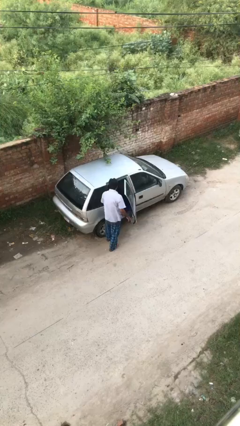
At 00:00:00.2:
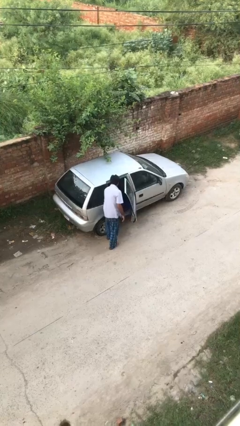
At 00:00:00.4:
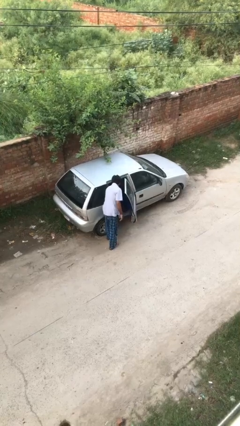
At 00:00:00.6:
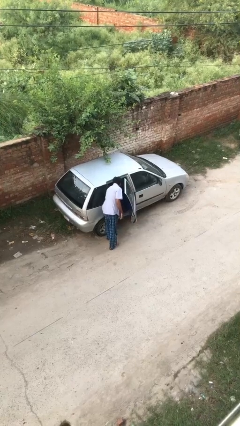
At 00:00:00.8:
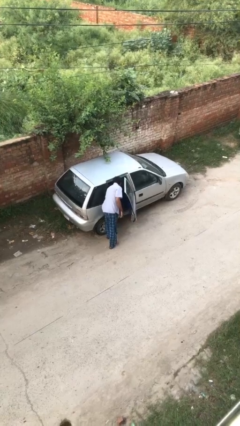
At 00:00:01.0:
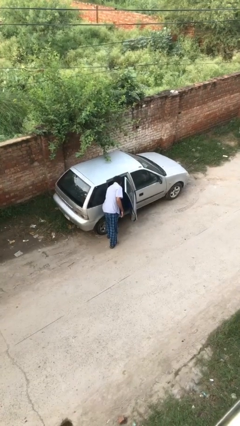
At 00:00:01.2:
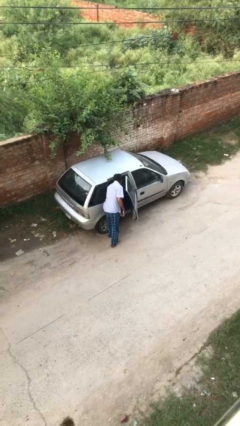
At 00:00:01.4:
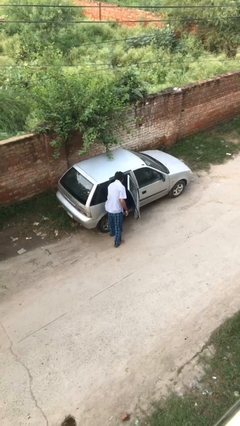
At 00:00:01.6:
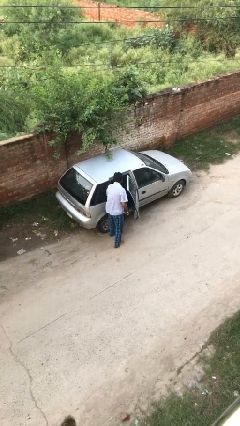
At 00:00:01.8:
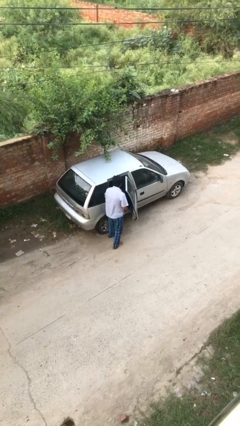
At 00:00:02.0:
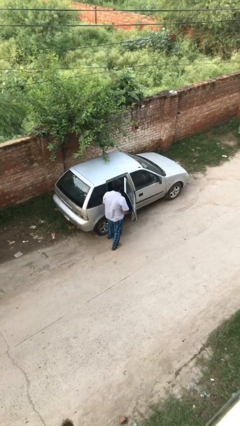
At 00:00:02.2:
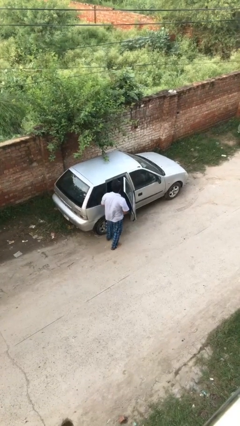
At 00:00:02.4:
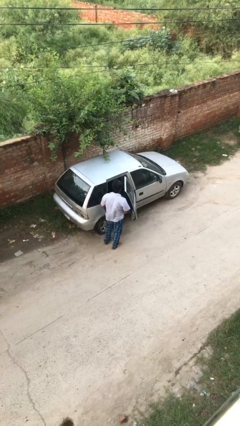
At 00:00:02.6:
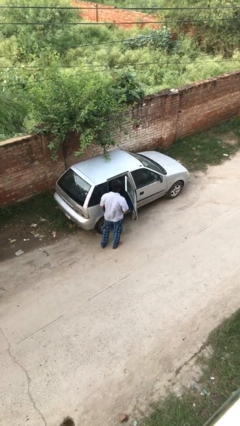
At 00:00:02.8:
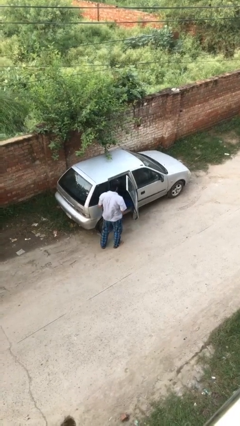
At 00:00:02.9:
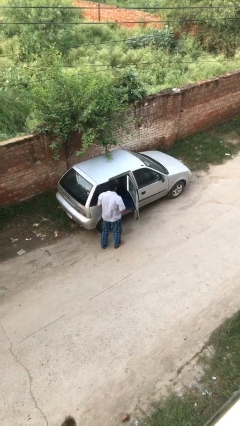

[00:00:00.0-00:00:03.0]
person unloads car

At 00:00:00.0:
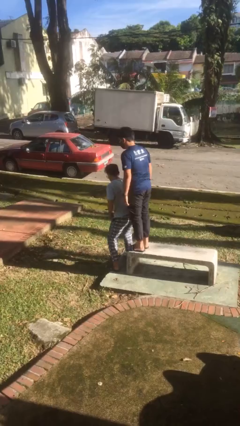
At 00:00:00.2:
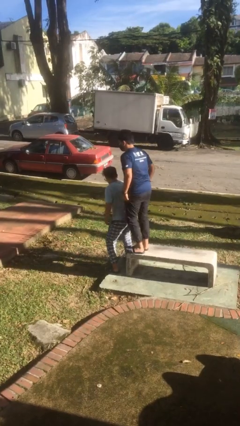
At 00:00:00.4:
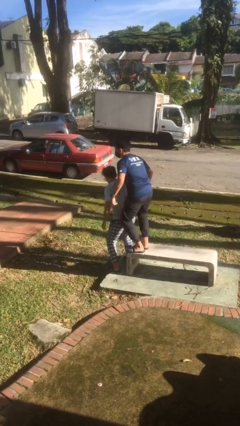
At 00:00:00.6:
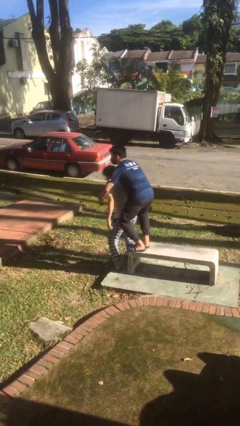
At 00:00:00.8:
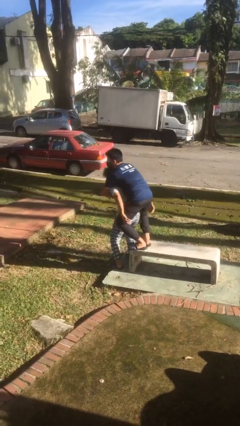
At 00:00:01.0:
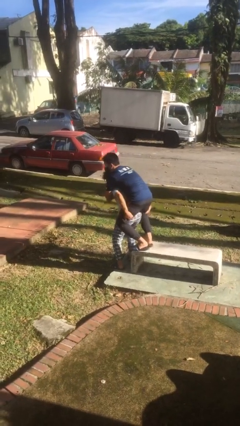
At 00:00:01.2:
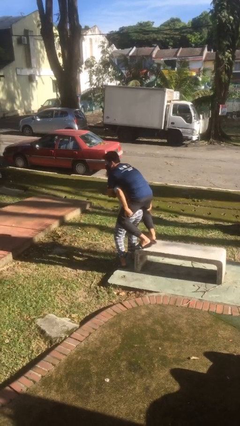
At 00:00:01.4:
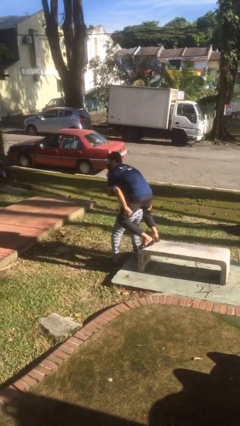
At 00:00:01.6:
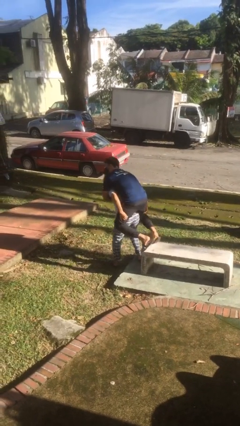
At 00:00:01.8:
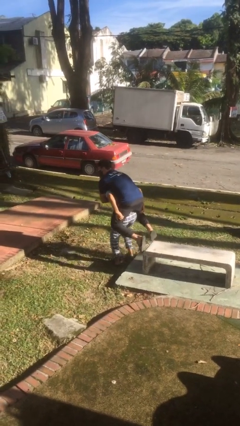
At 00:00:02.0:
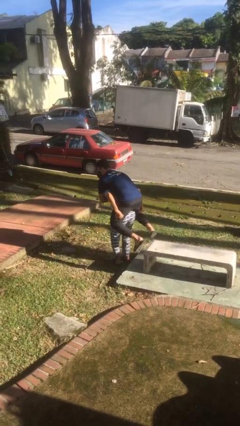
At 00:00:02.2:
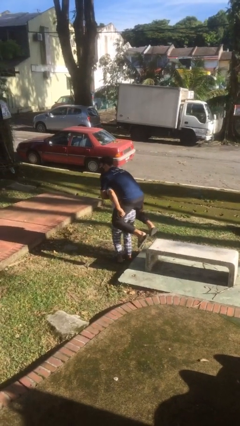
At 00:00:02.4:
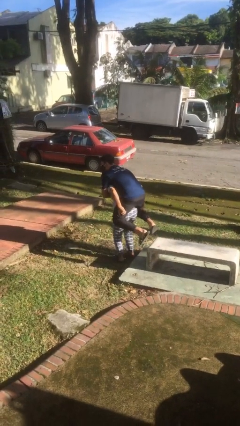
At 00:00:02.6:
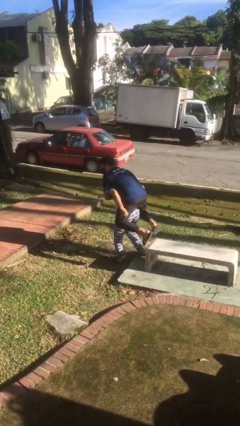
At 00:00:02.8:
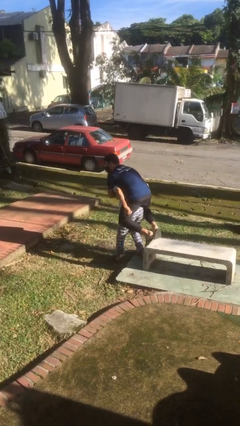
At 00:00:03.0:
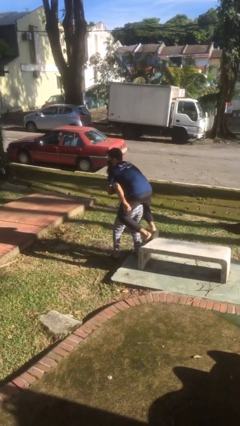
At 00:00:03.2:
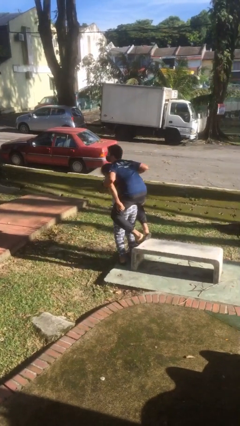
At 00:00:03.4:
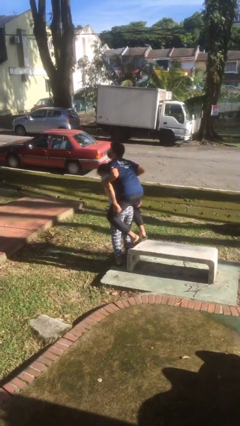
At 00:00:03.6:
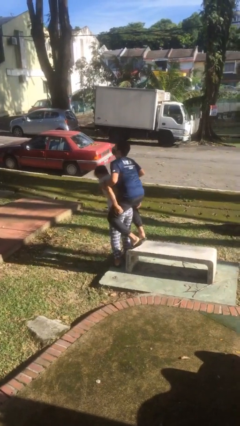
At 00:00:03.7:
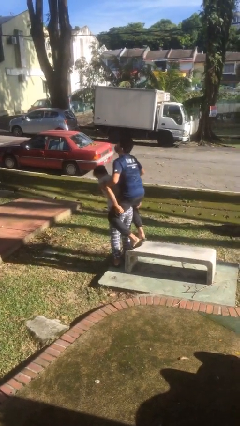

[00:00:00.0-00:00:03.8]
person carries person on shoulders

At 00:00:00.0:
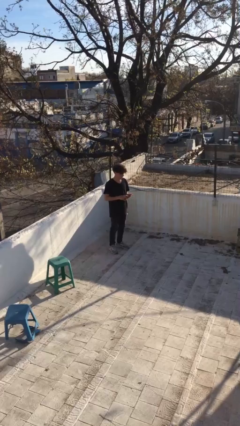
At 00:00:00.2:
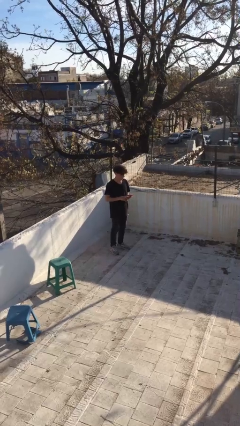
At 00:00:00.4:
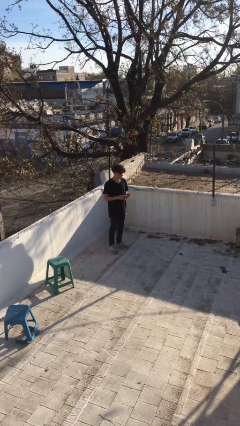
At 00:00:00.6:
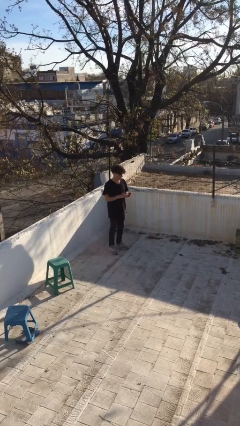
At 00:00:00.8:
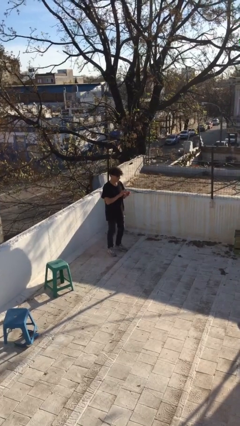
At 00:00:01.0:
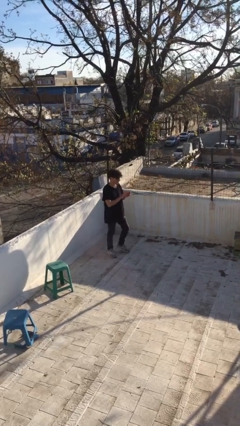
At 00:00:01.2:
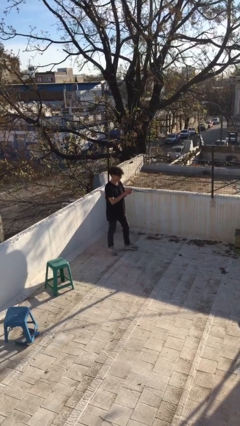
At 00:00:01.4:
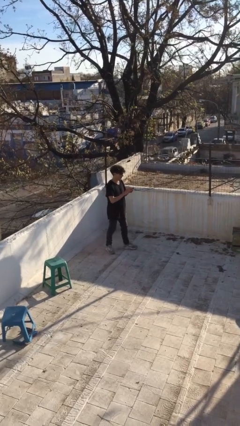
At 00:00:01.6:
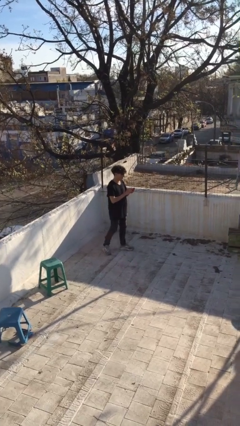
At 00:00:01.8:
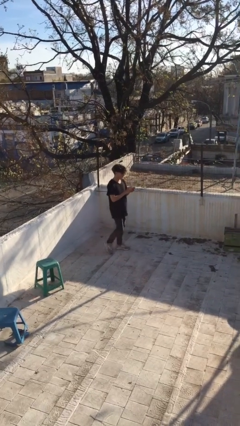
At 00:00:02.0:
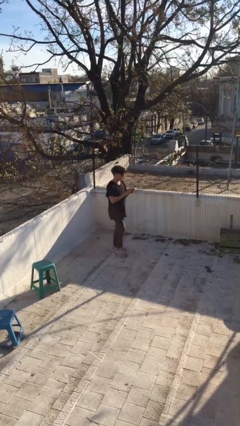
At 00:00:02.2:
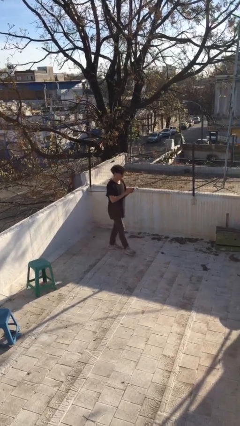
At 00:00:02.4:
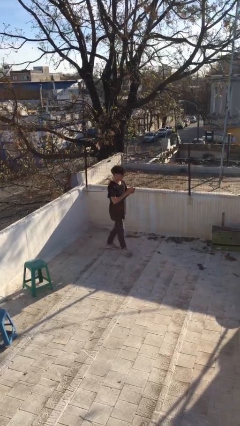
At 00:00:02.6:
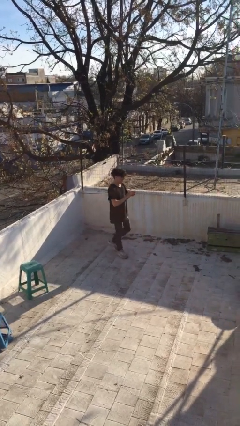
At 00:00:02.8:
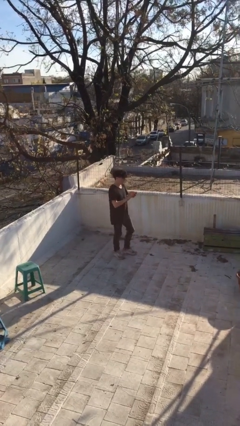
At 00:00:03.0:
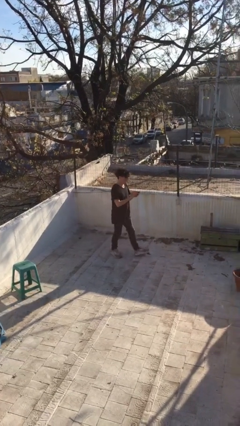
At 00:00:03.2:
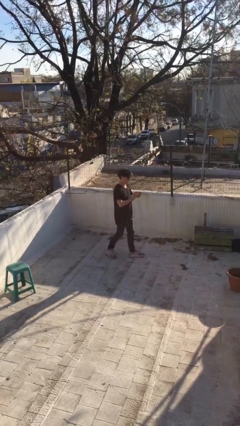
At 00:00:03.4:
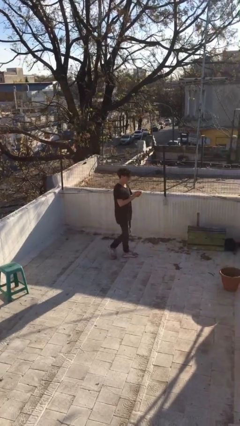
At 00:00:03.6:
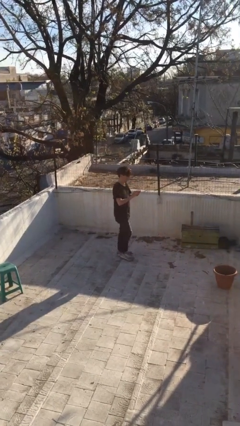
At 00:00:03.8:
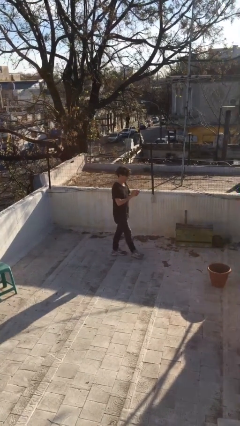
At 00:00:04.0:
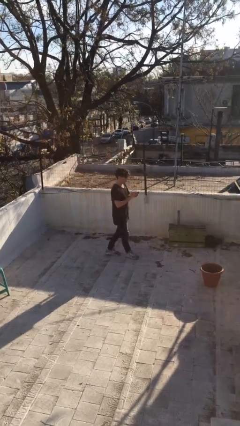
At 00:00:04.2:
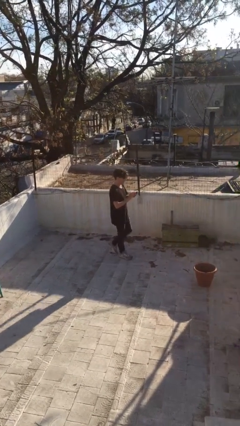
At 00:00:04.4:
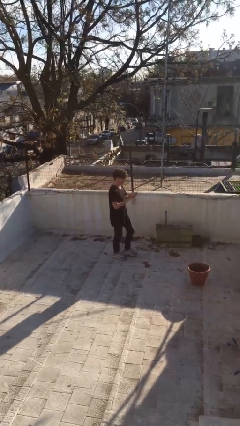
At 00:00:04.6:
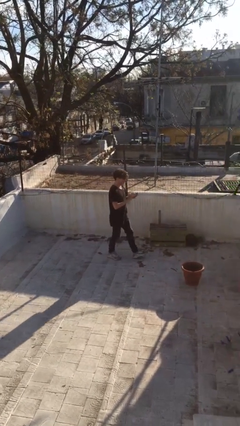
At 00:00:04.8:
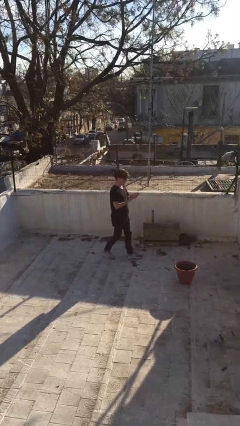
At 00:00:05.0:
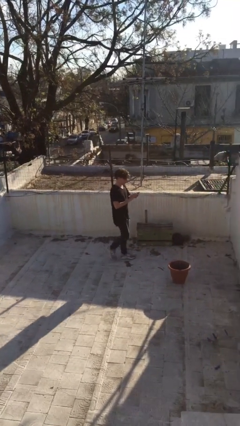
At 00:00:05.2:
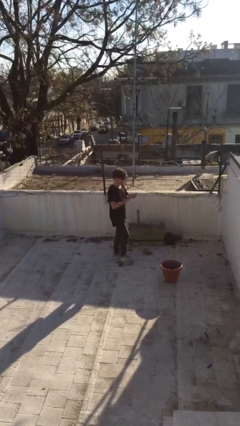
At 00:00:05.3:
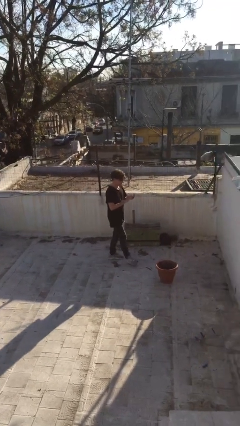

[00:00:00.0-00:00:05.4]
person texts on phone

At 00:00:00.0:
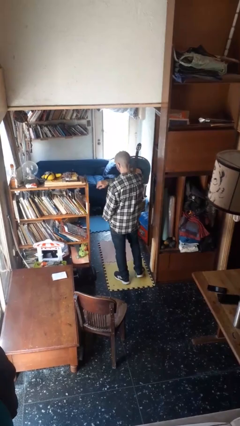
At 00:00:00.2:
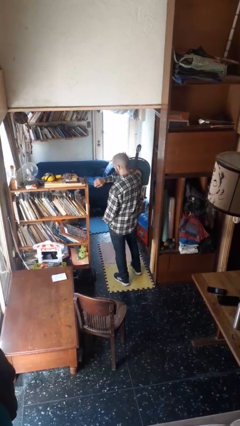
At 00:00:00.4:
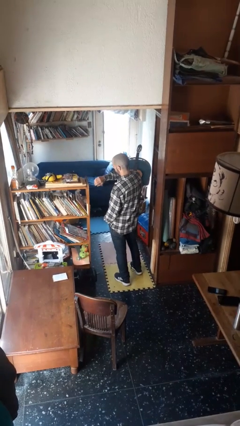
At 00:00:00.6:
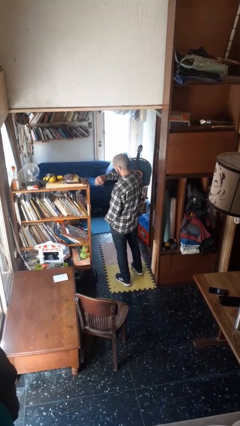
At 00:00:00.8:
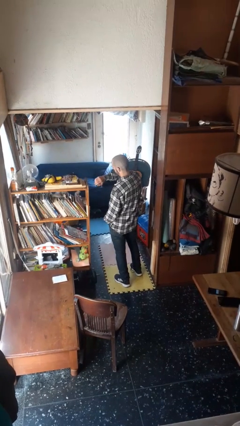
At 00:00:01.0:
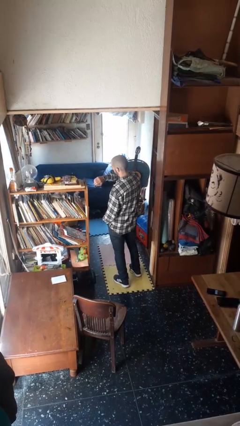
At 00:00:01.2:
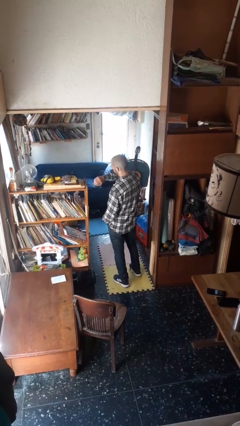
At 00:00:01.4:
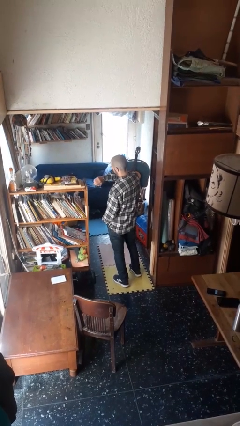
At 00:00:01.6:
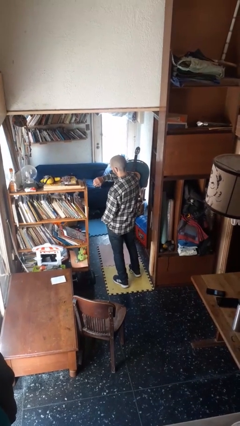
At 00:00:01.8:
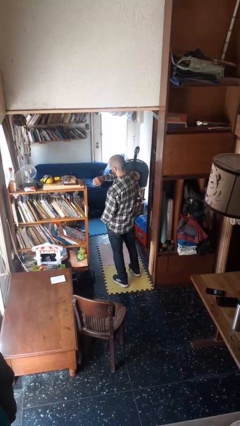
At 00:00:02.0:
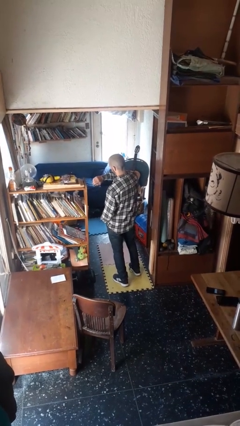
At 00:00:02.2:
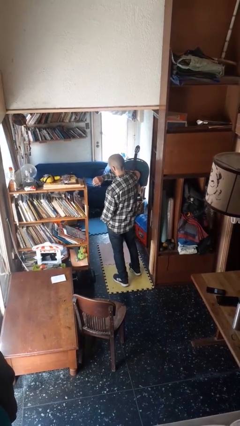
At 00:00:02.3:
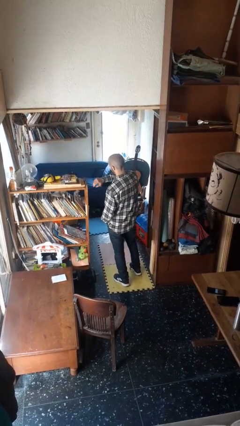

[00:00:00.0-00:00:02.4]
person looks at wristwatch

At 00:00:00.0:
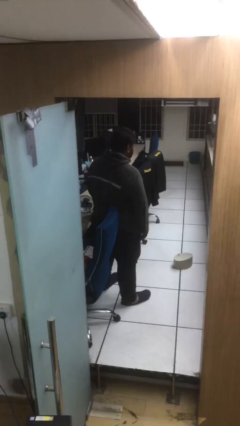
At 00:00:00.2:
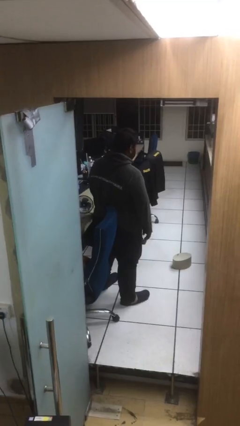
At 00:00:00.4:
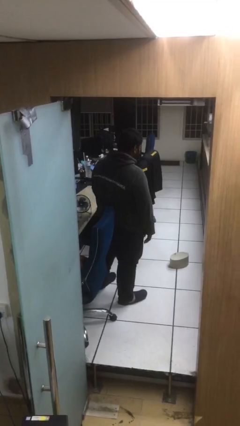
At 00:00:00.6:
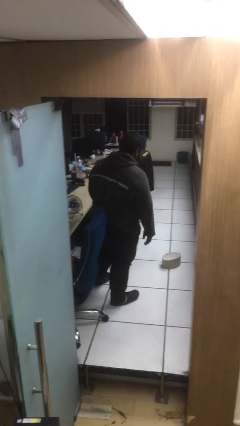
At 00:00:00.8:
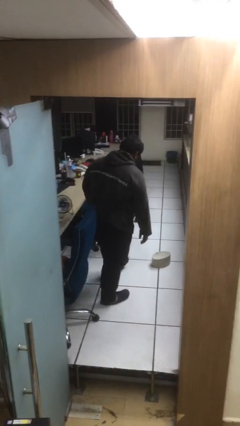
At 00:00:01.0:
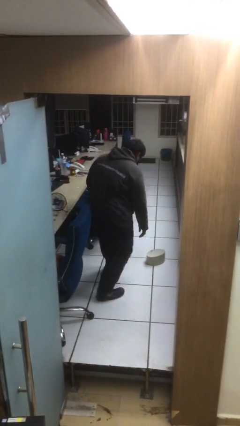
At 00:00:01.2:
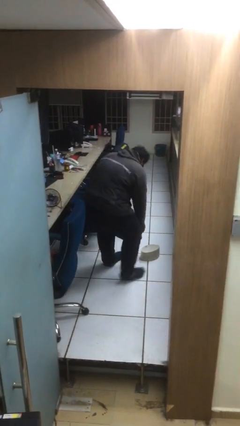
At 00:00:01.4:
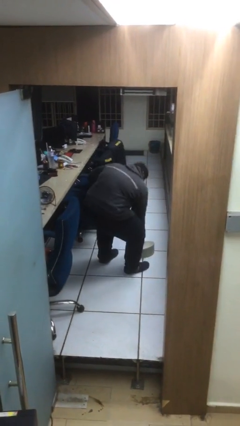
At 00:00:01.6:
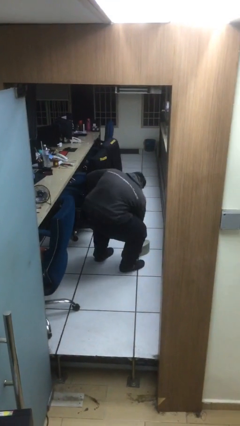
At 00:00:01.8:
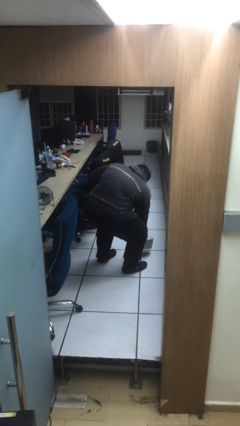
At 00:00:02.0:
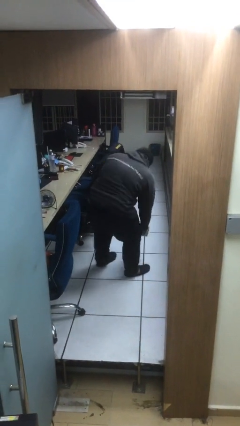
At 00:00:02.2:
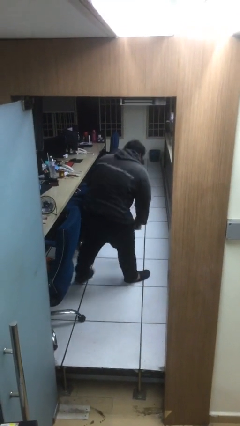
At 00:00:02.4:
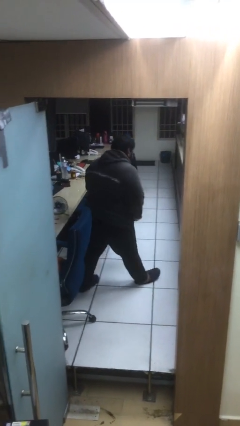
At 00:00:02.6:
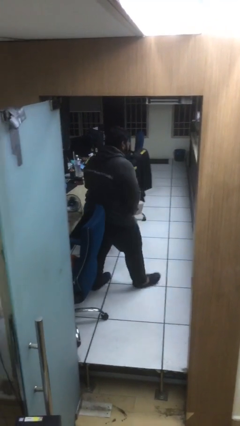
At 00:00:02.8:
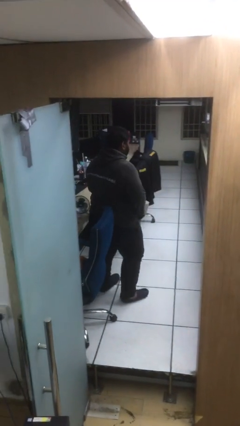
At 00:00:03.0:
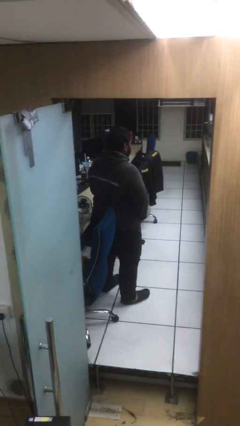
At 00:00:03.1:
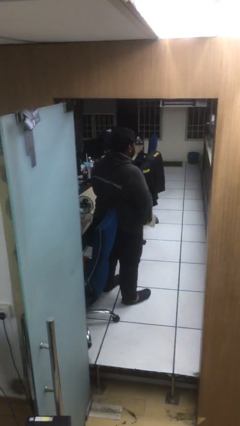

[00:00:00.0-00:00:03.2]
person picks up object from floor
